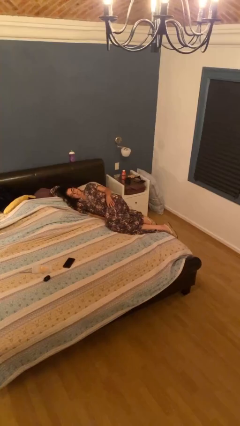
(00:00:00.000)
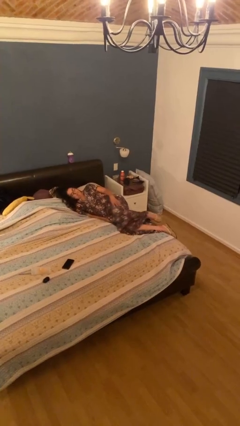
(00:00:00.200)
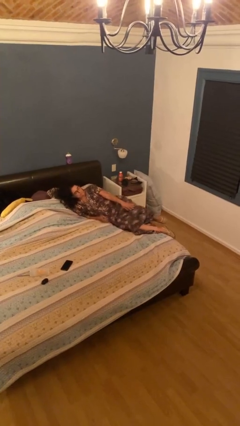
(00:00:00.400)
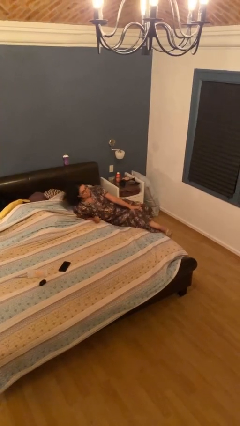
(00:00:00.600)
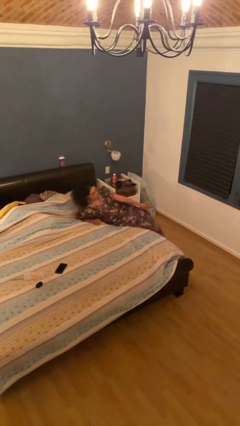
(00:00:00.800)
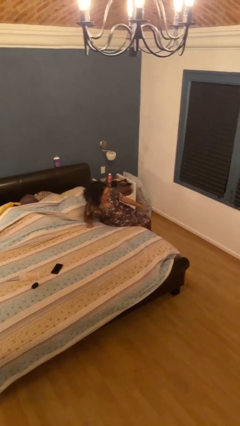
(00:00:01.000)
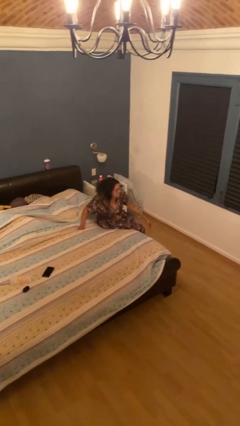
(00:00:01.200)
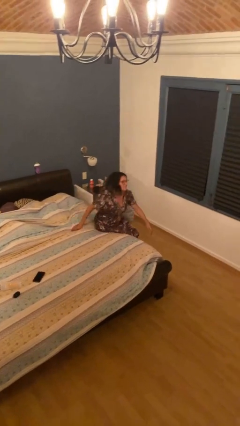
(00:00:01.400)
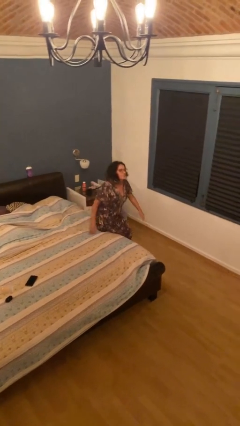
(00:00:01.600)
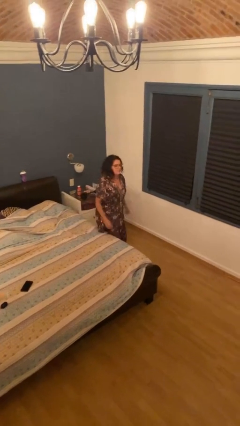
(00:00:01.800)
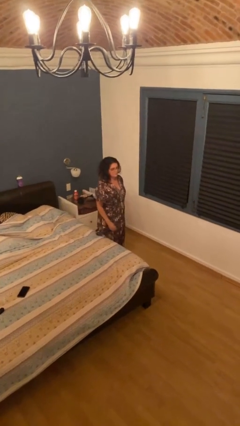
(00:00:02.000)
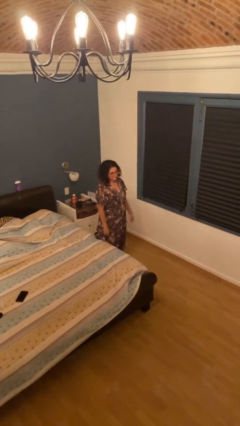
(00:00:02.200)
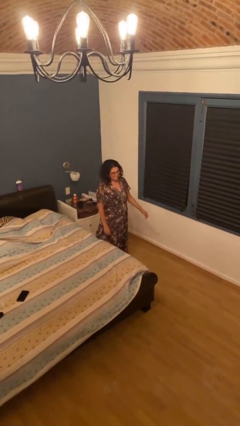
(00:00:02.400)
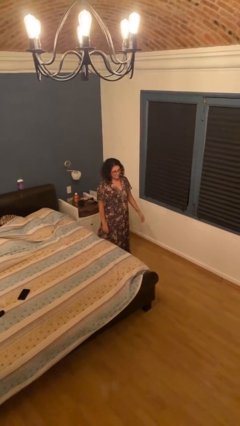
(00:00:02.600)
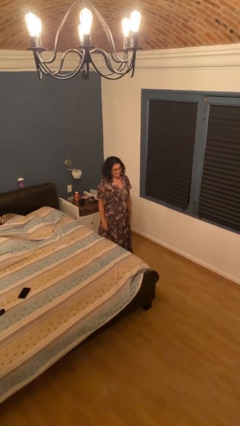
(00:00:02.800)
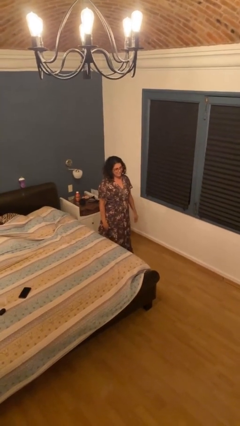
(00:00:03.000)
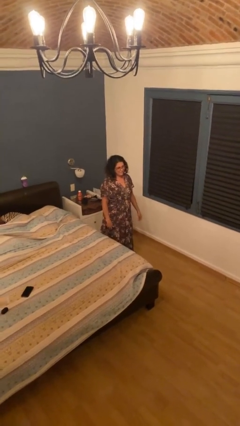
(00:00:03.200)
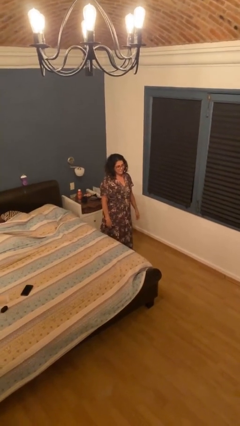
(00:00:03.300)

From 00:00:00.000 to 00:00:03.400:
person stands up

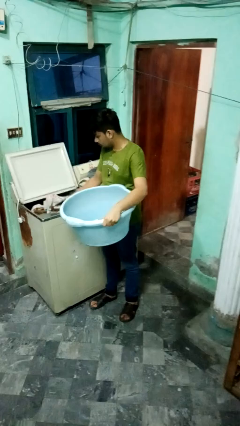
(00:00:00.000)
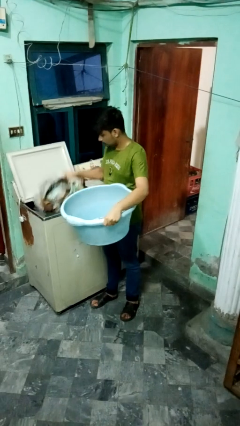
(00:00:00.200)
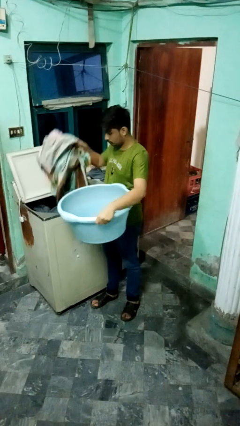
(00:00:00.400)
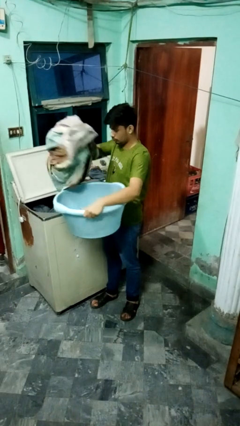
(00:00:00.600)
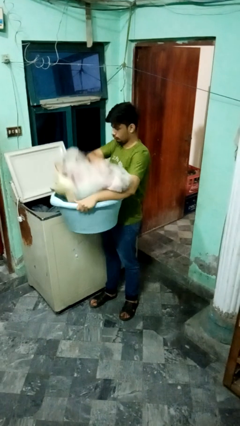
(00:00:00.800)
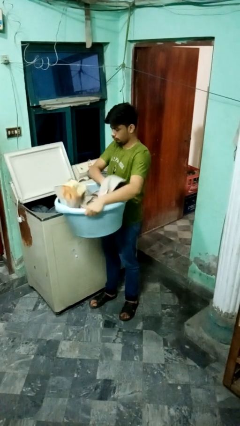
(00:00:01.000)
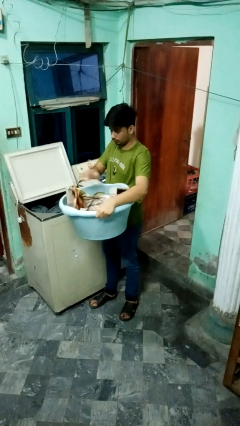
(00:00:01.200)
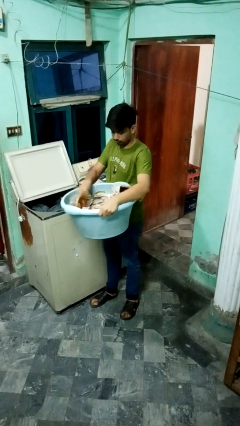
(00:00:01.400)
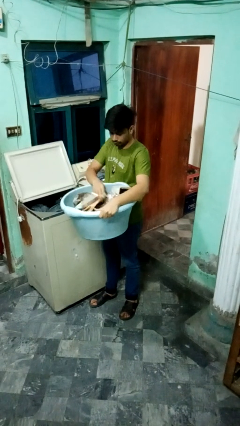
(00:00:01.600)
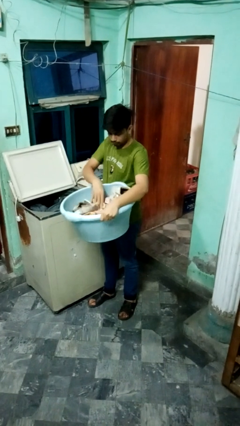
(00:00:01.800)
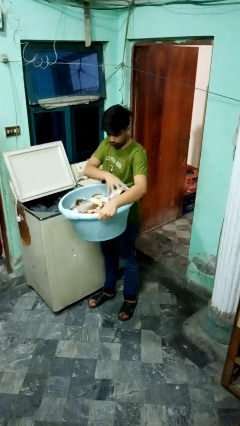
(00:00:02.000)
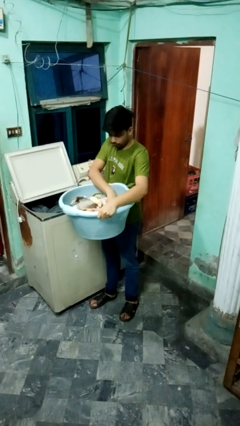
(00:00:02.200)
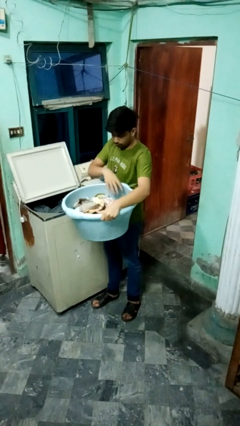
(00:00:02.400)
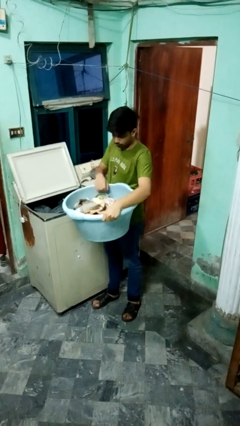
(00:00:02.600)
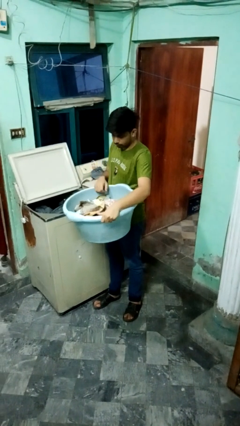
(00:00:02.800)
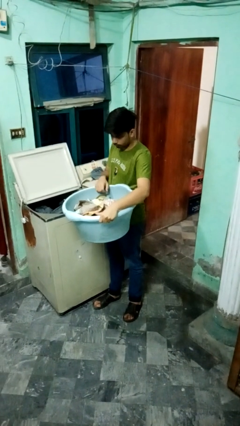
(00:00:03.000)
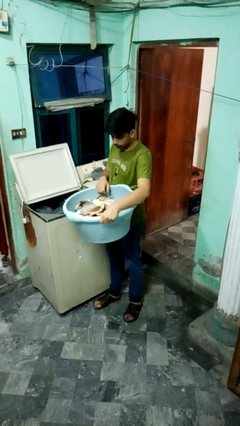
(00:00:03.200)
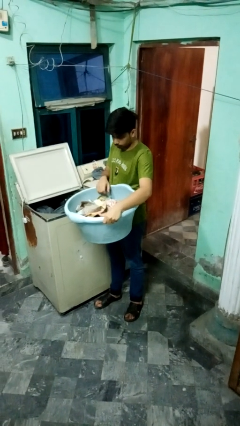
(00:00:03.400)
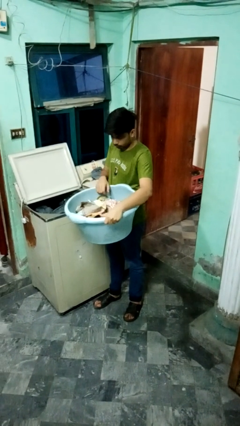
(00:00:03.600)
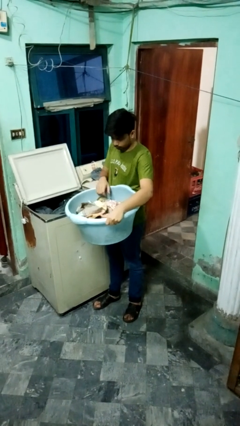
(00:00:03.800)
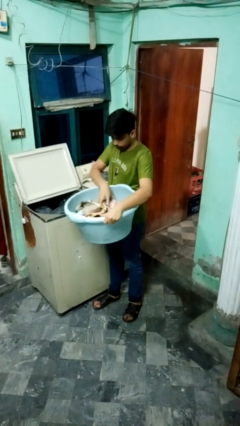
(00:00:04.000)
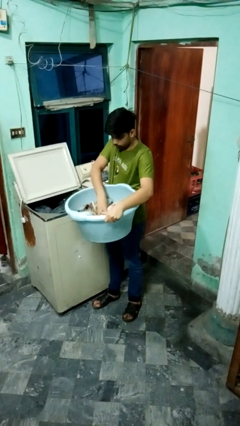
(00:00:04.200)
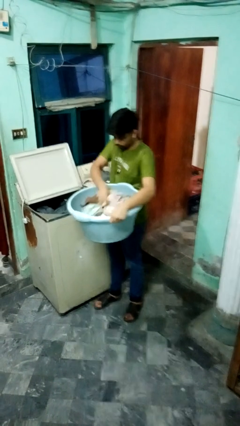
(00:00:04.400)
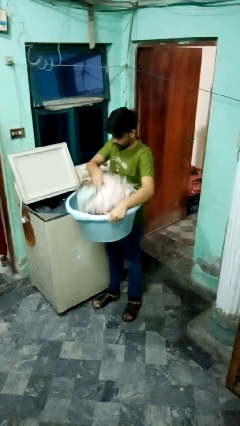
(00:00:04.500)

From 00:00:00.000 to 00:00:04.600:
person unloads clotheswasher

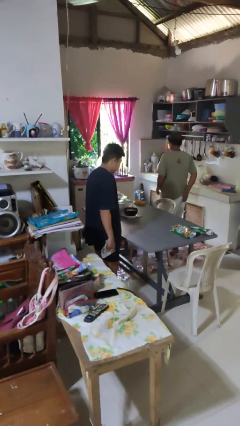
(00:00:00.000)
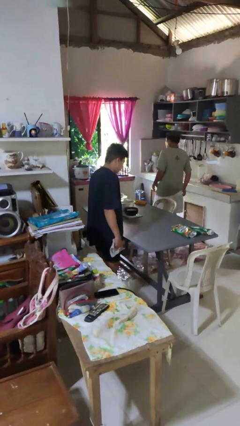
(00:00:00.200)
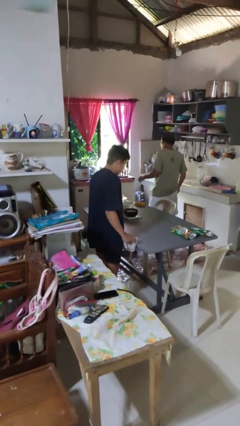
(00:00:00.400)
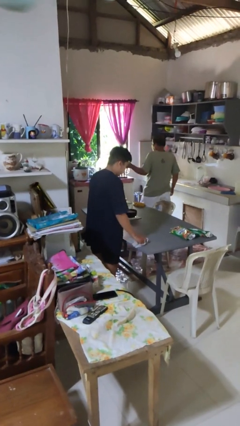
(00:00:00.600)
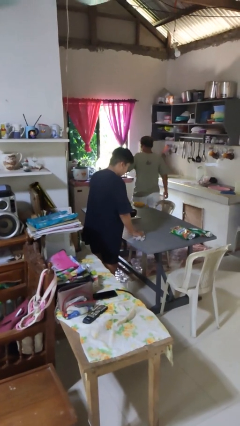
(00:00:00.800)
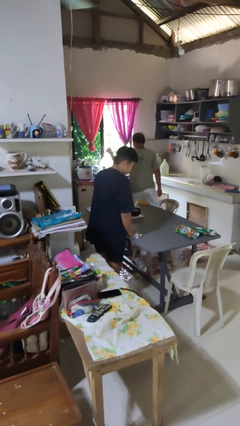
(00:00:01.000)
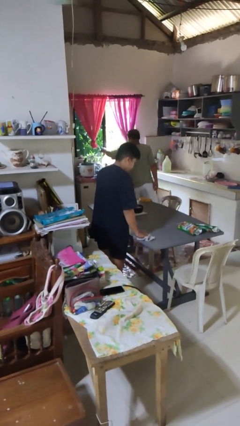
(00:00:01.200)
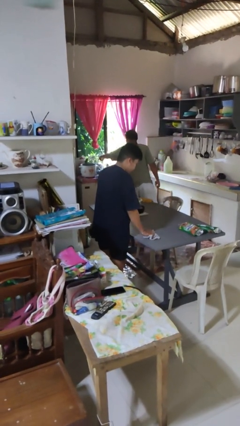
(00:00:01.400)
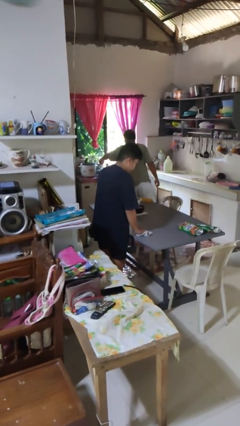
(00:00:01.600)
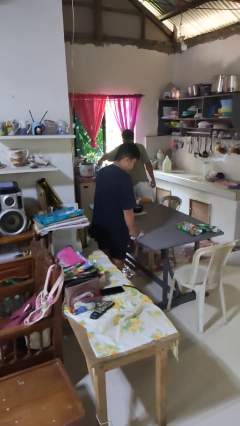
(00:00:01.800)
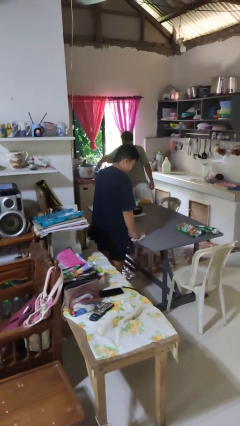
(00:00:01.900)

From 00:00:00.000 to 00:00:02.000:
person cleans table with rag

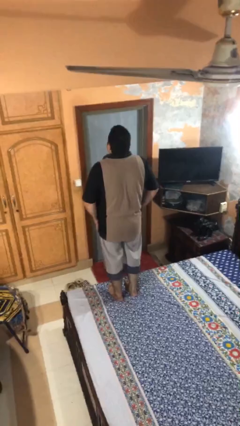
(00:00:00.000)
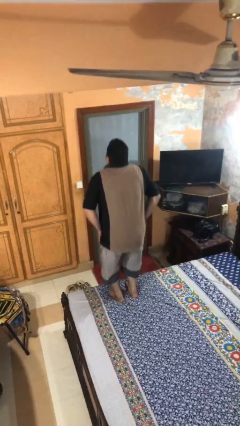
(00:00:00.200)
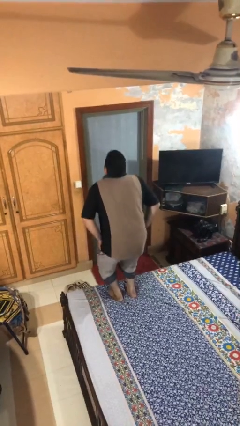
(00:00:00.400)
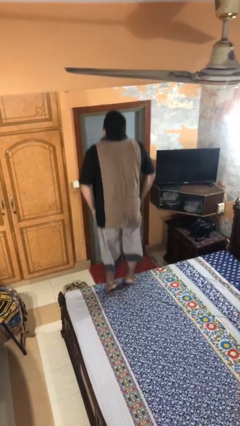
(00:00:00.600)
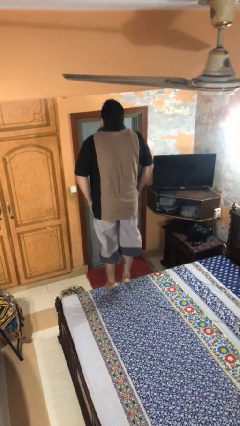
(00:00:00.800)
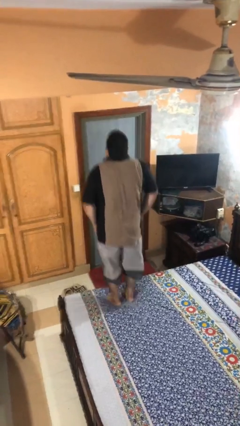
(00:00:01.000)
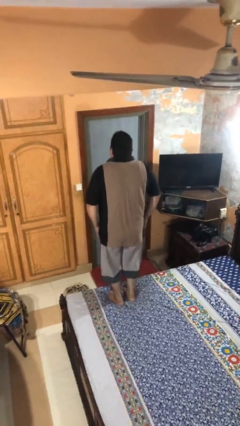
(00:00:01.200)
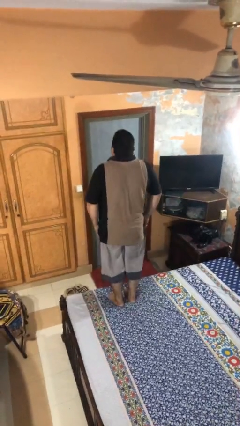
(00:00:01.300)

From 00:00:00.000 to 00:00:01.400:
person jumps on bed

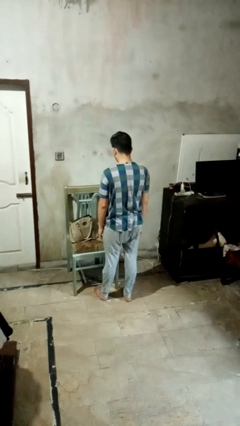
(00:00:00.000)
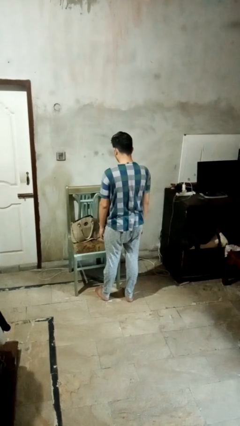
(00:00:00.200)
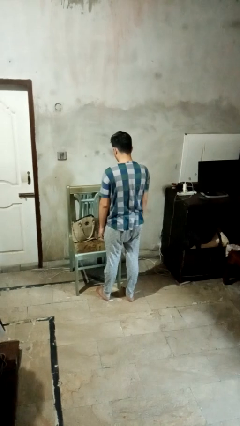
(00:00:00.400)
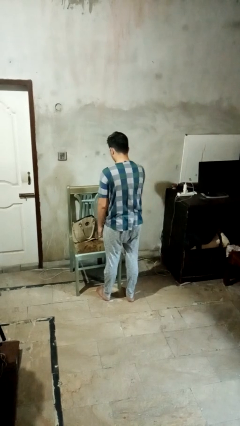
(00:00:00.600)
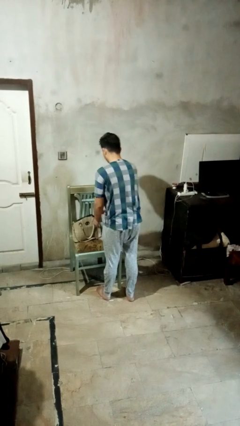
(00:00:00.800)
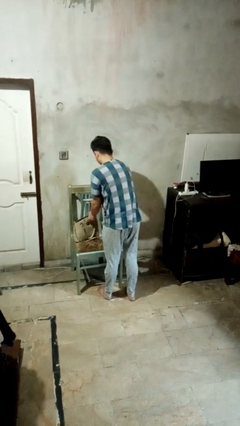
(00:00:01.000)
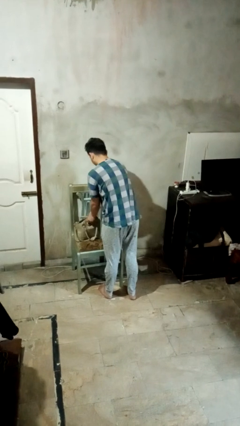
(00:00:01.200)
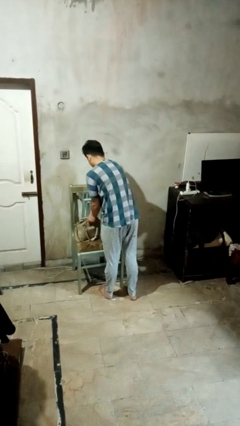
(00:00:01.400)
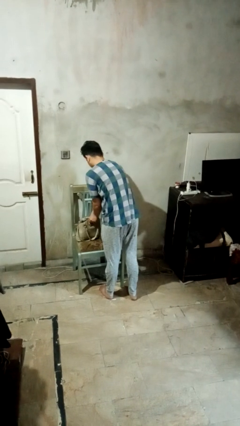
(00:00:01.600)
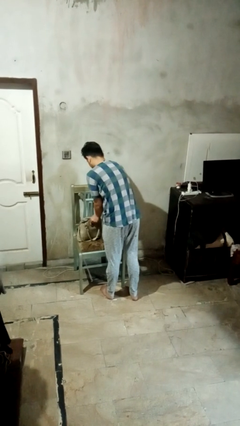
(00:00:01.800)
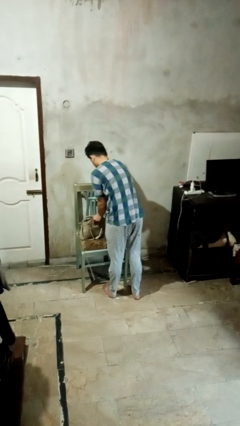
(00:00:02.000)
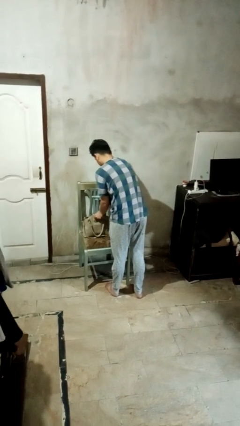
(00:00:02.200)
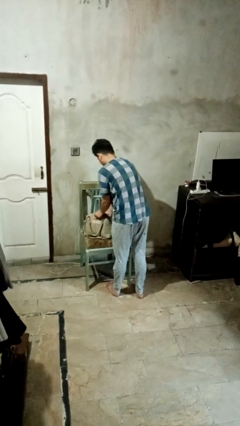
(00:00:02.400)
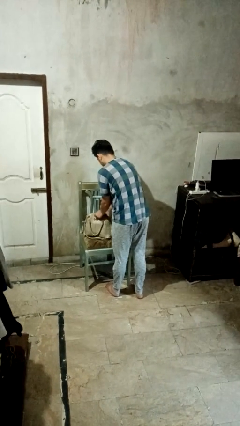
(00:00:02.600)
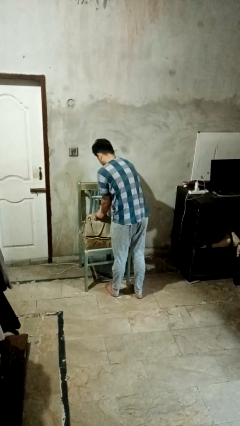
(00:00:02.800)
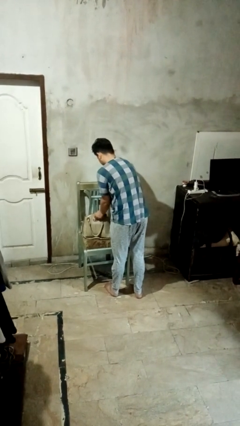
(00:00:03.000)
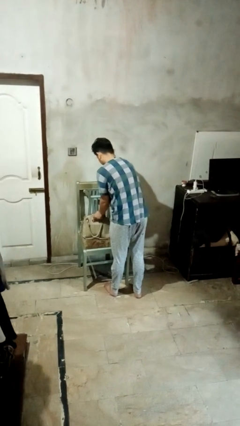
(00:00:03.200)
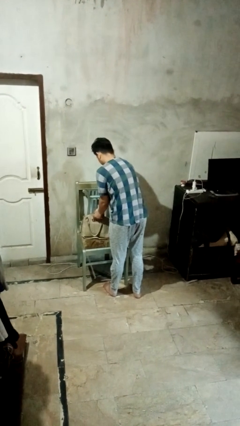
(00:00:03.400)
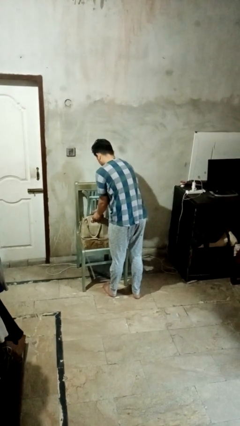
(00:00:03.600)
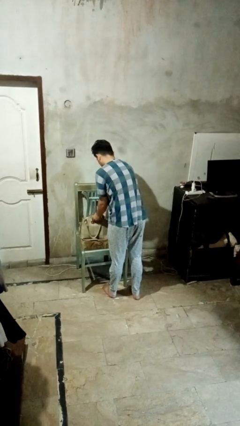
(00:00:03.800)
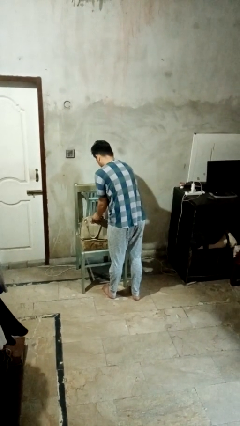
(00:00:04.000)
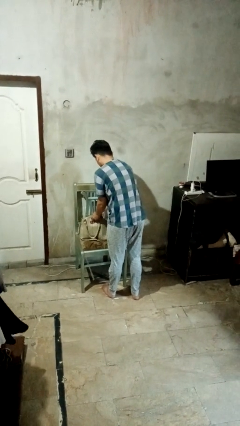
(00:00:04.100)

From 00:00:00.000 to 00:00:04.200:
person searches in purse

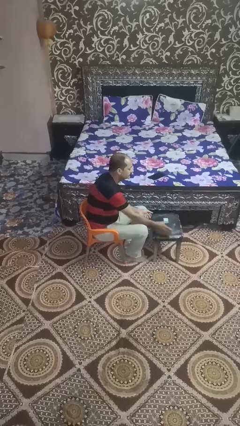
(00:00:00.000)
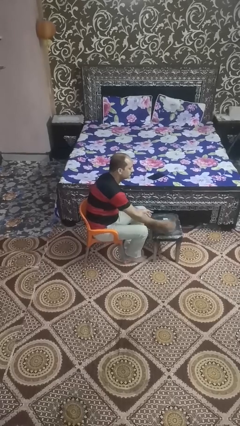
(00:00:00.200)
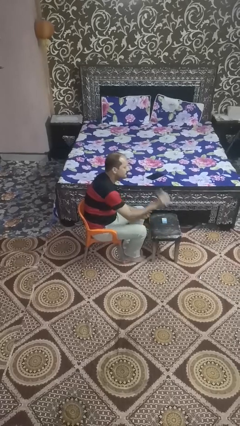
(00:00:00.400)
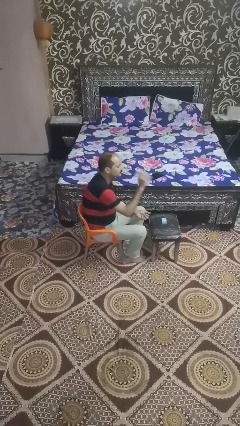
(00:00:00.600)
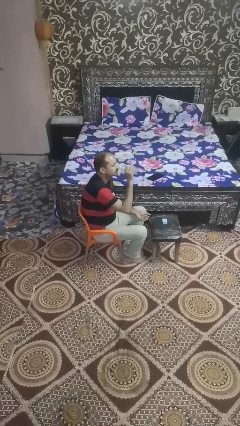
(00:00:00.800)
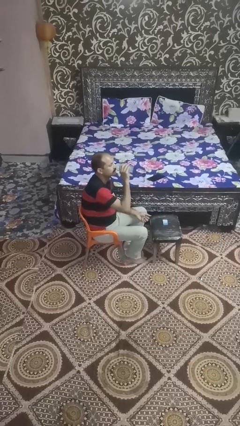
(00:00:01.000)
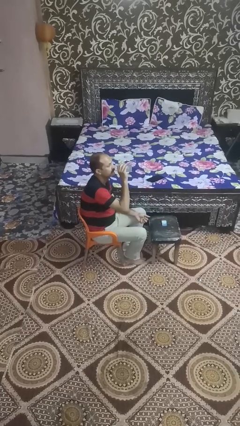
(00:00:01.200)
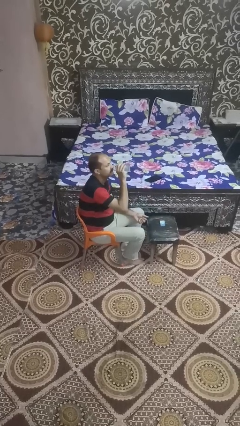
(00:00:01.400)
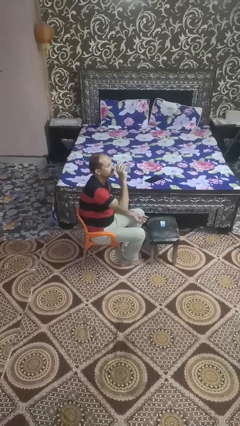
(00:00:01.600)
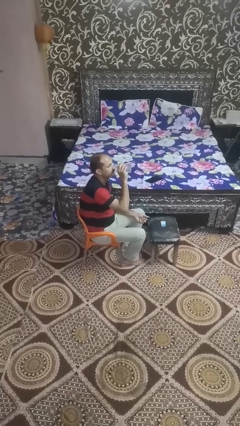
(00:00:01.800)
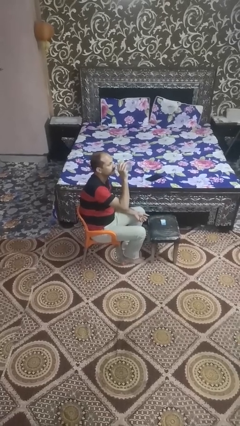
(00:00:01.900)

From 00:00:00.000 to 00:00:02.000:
person sets upright glass
